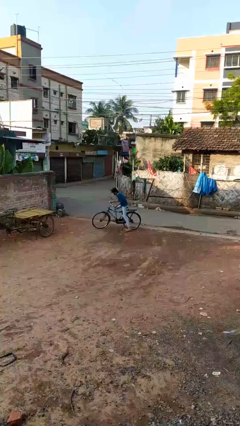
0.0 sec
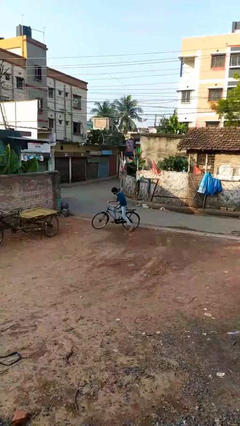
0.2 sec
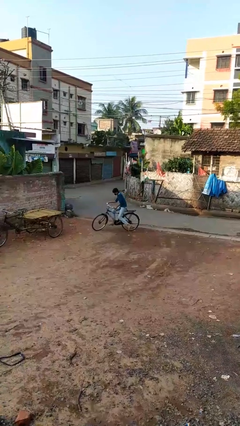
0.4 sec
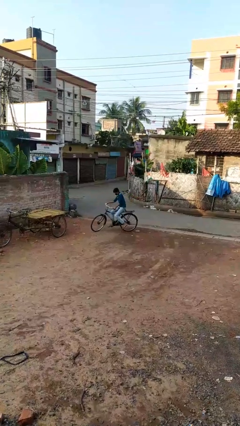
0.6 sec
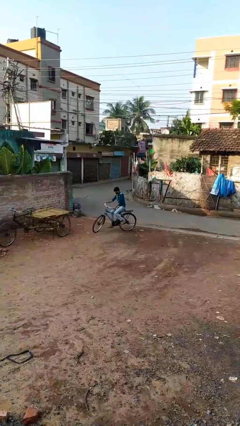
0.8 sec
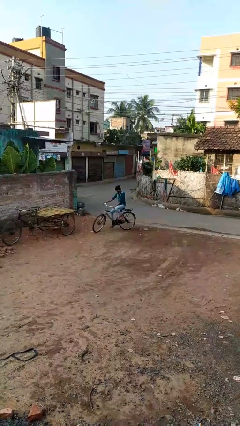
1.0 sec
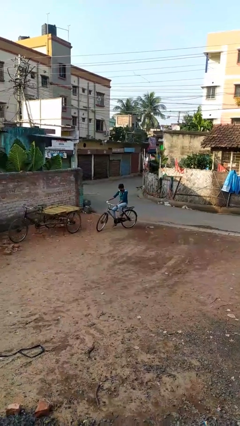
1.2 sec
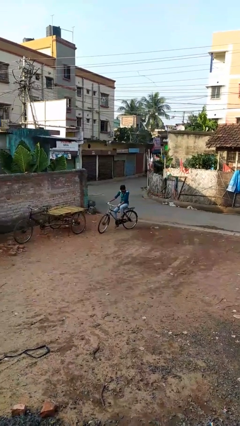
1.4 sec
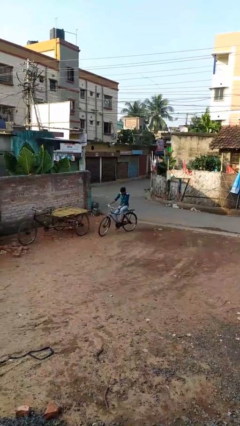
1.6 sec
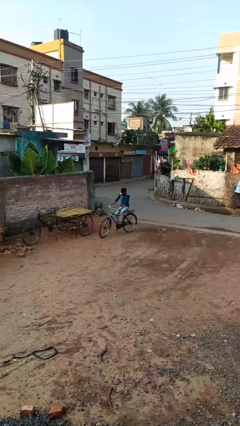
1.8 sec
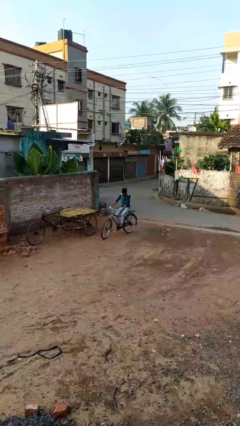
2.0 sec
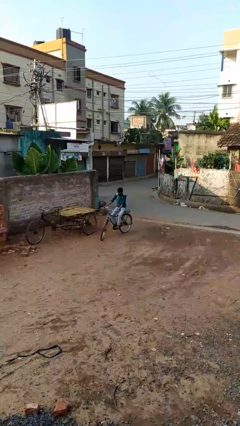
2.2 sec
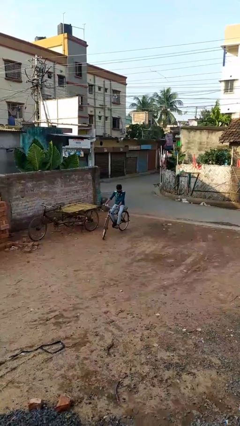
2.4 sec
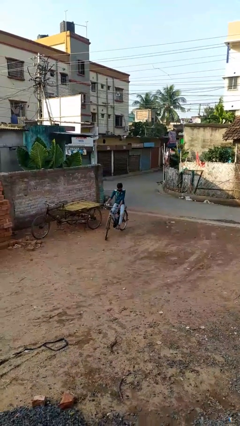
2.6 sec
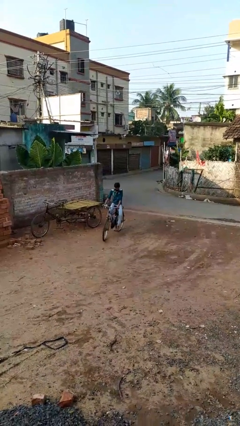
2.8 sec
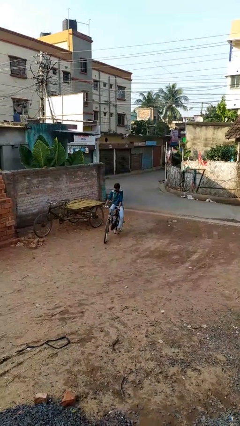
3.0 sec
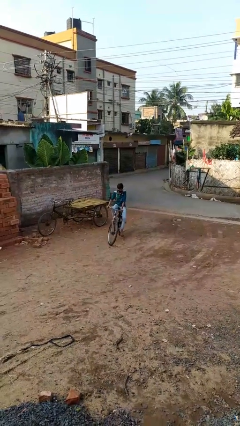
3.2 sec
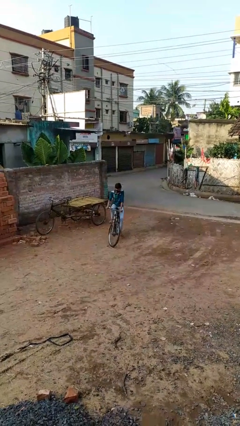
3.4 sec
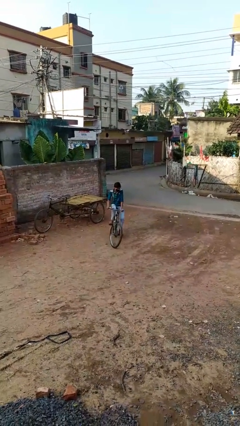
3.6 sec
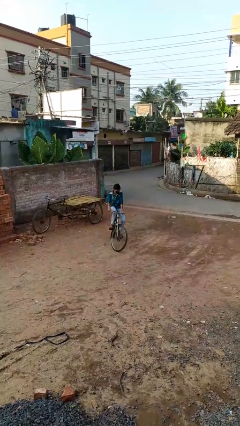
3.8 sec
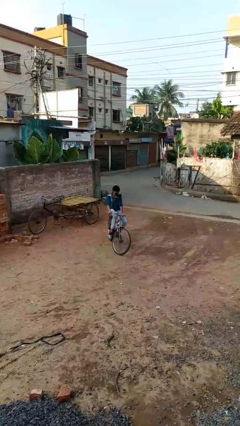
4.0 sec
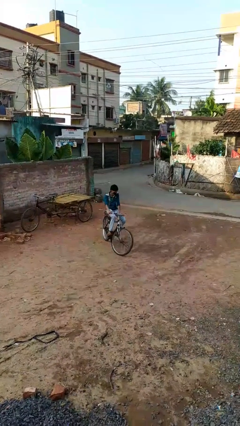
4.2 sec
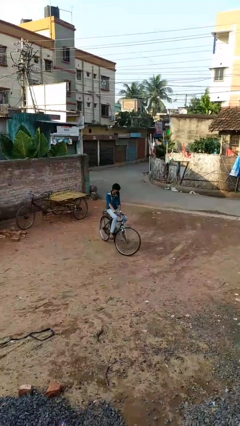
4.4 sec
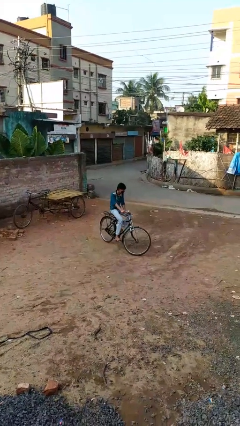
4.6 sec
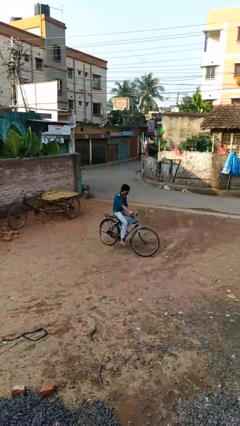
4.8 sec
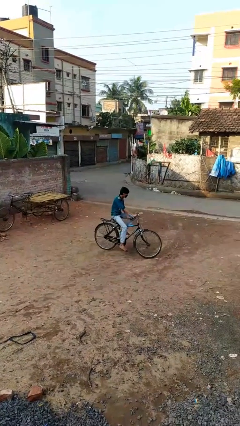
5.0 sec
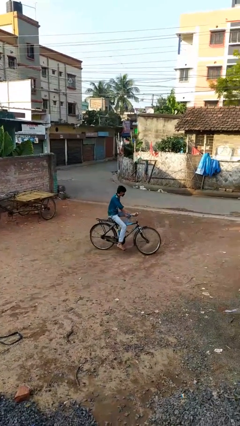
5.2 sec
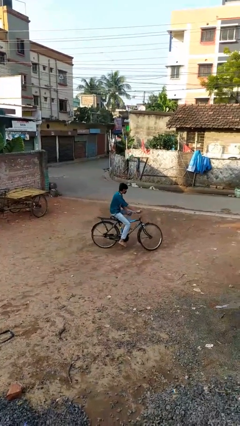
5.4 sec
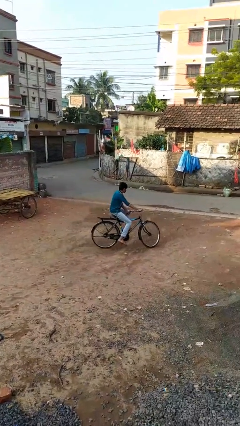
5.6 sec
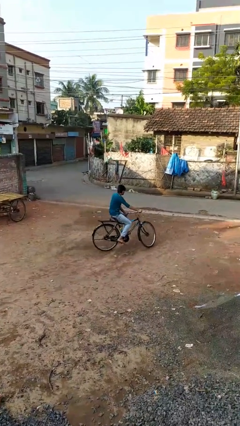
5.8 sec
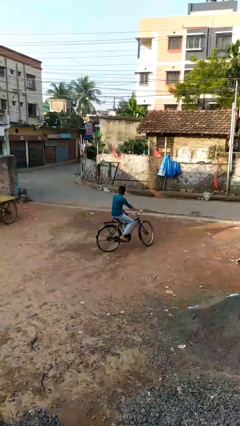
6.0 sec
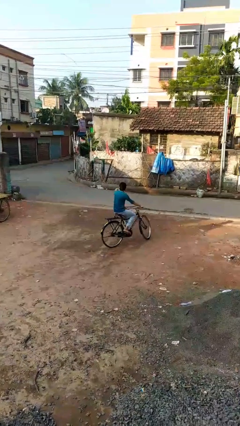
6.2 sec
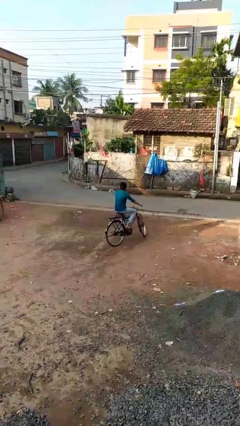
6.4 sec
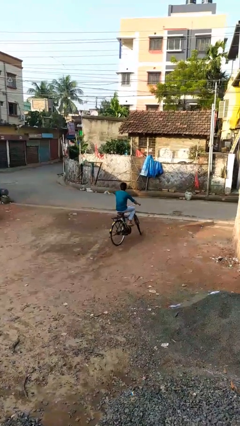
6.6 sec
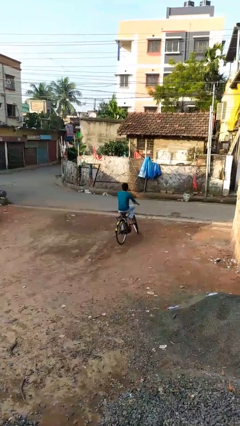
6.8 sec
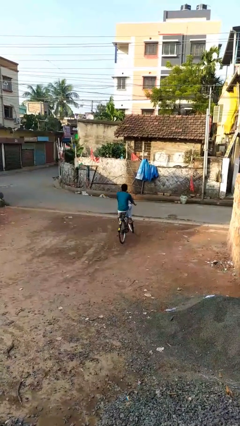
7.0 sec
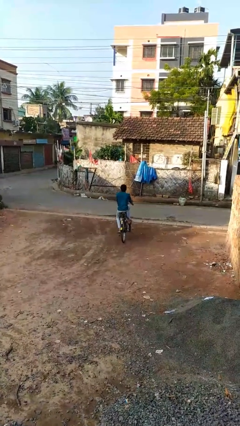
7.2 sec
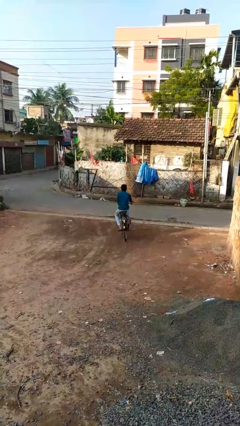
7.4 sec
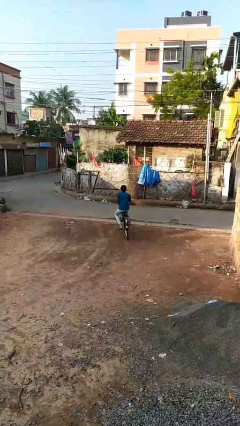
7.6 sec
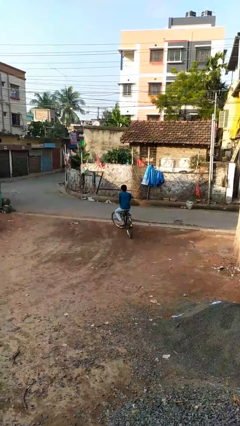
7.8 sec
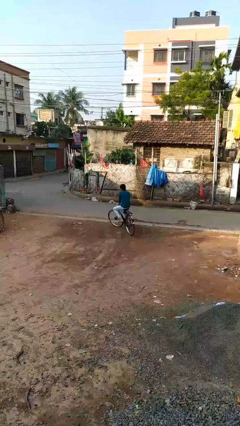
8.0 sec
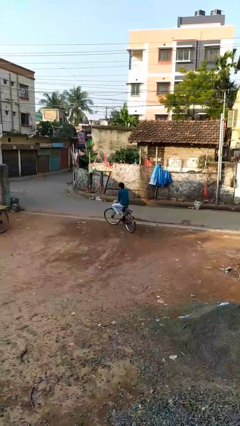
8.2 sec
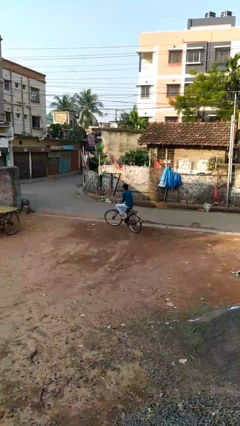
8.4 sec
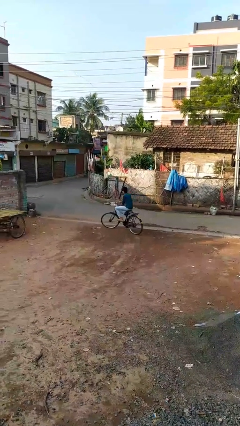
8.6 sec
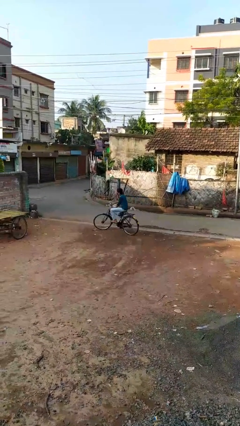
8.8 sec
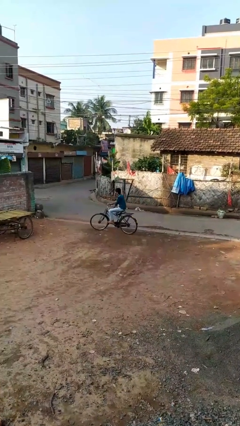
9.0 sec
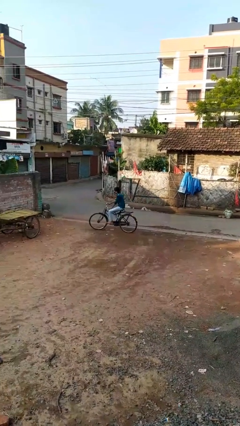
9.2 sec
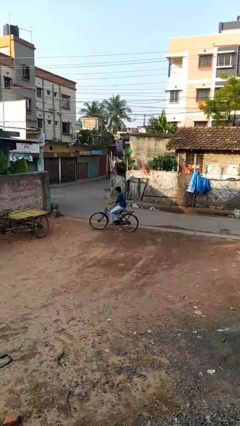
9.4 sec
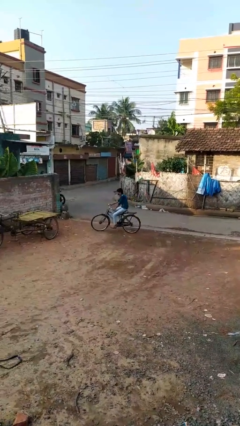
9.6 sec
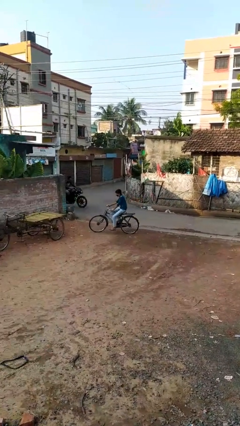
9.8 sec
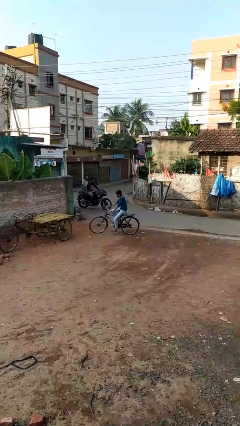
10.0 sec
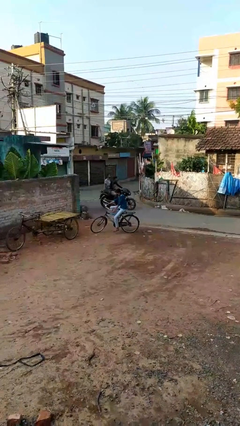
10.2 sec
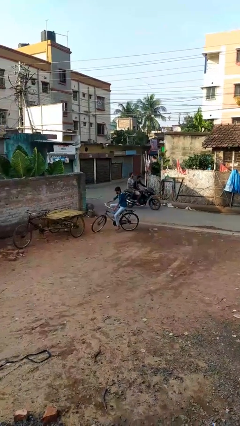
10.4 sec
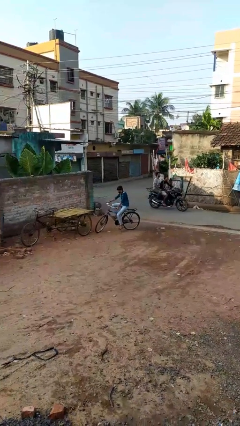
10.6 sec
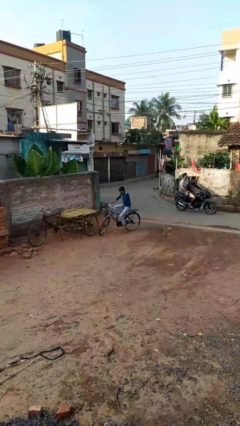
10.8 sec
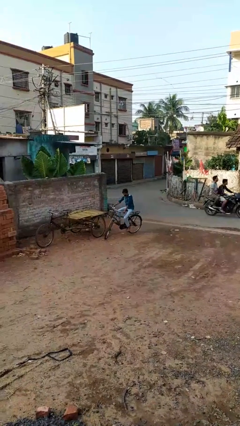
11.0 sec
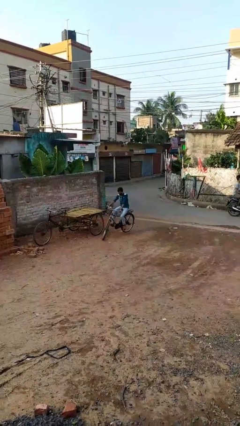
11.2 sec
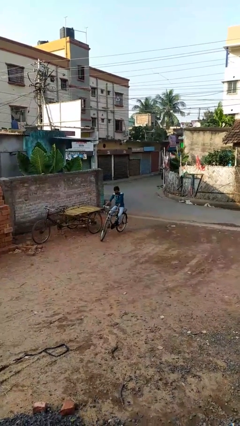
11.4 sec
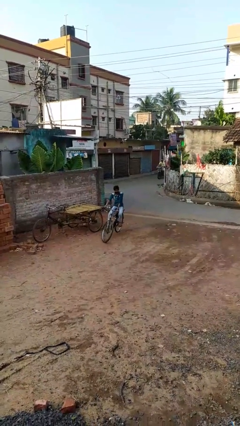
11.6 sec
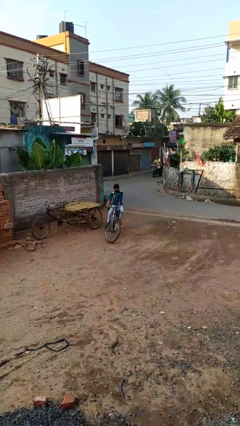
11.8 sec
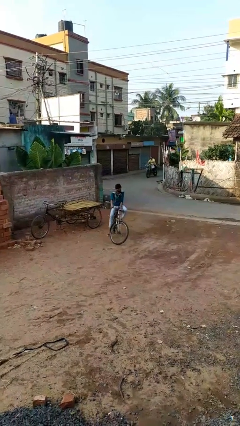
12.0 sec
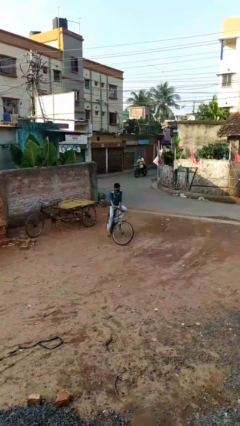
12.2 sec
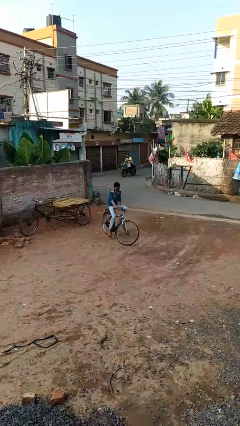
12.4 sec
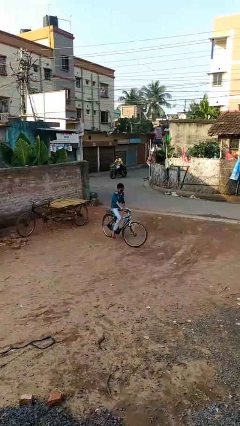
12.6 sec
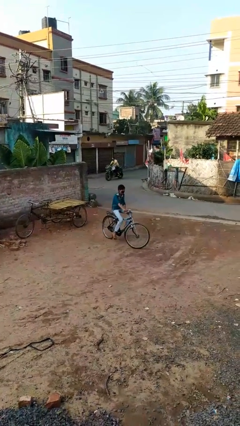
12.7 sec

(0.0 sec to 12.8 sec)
person rides bicycle

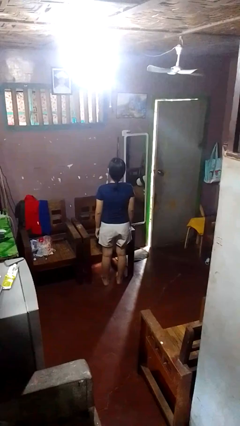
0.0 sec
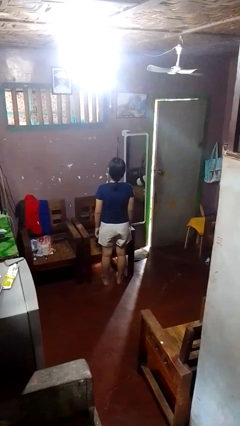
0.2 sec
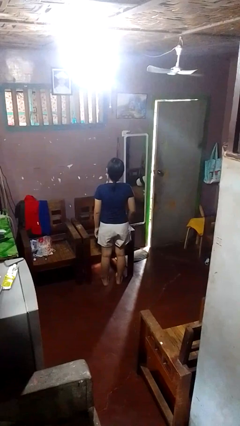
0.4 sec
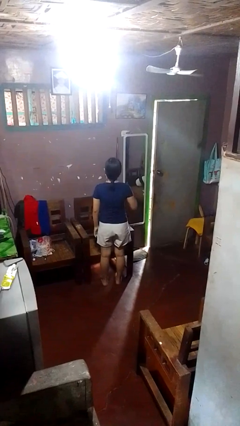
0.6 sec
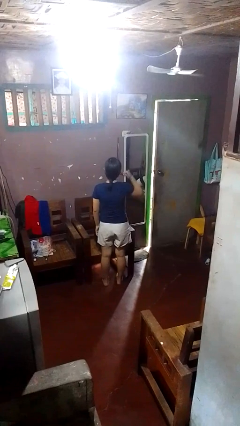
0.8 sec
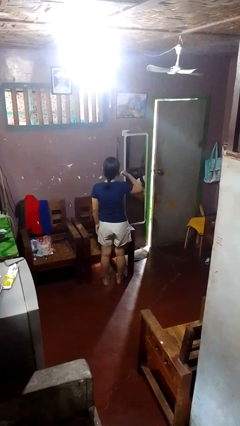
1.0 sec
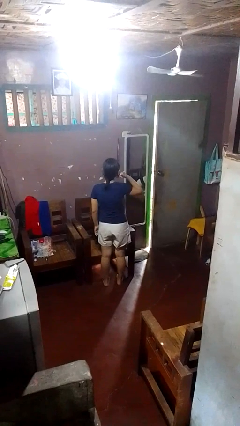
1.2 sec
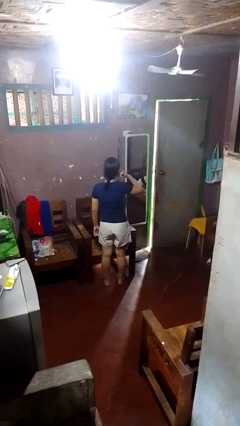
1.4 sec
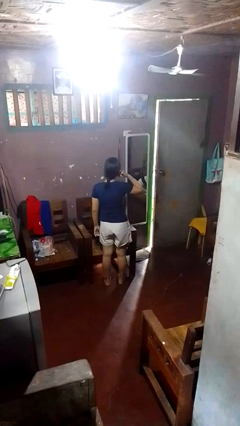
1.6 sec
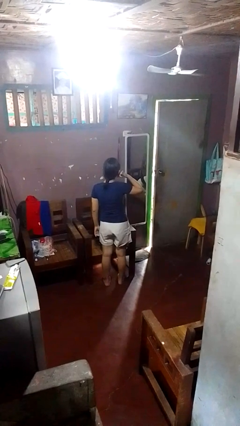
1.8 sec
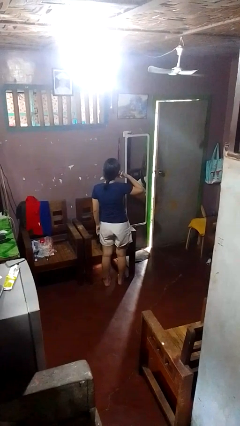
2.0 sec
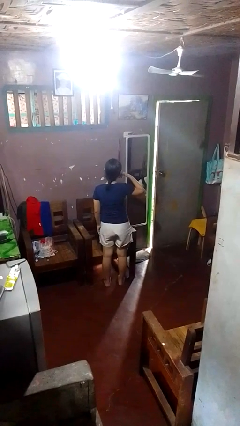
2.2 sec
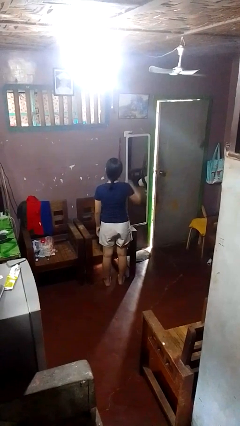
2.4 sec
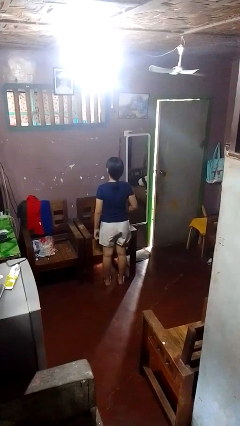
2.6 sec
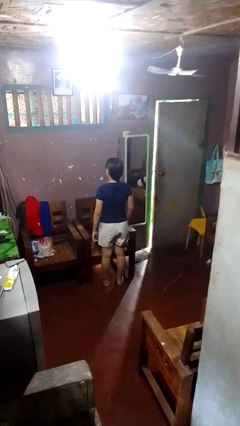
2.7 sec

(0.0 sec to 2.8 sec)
person gestures call me

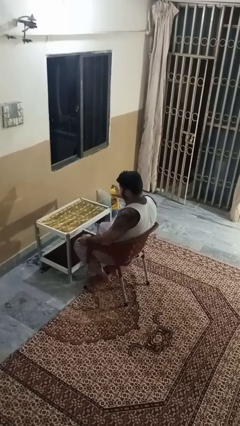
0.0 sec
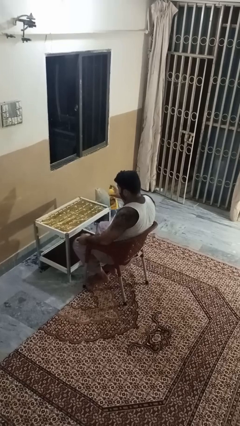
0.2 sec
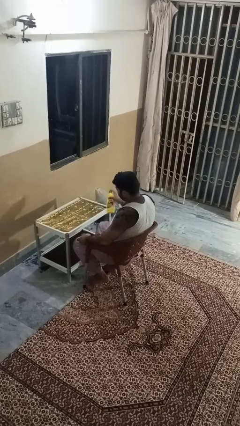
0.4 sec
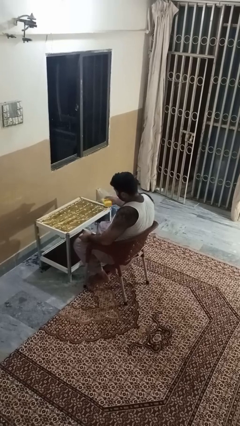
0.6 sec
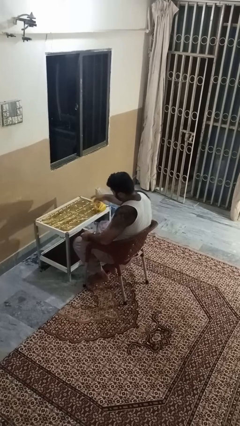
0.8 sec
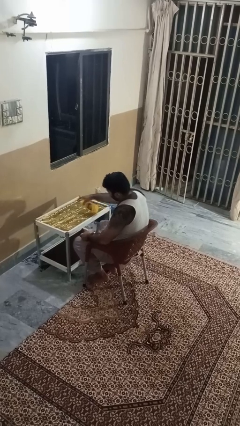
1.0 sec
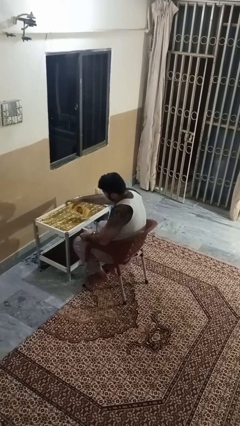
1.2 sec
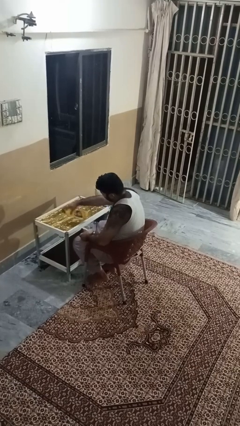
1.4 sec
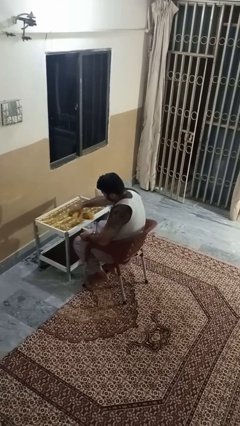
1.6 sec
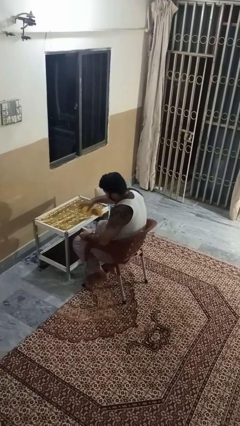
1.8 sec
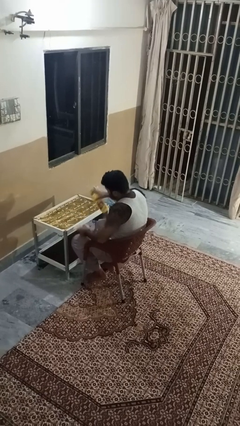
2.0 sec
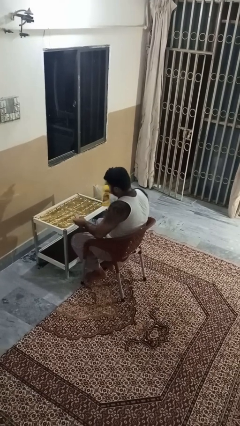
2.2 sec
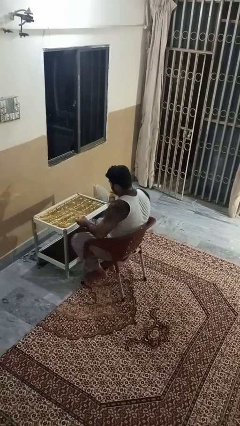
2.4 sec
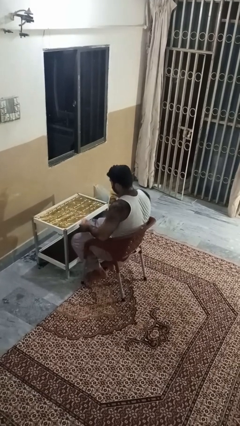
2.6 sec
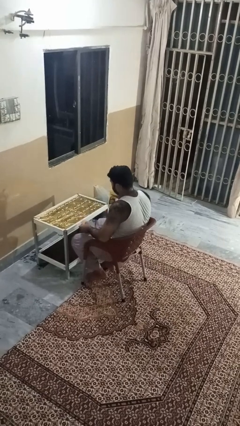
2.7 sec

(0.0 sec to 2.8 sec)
person sprays from bottle
